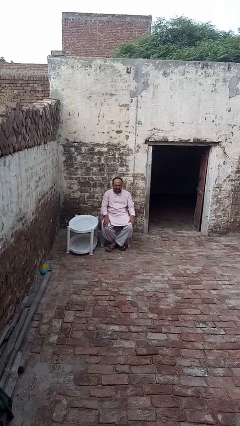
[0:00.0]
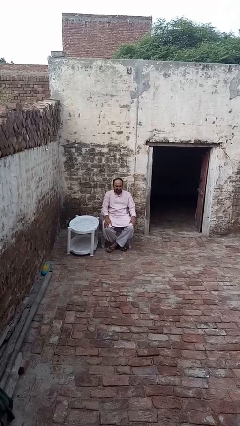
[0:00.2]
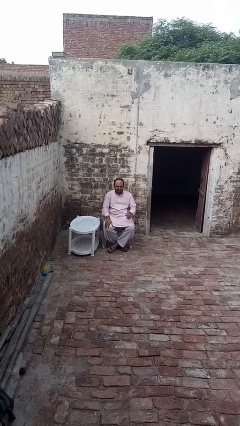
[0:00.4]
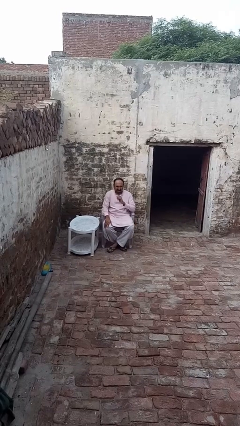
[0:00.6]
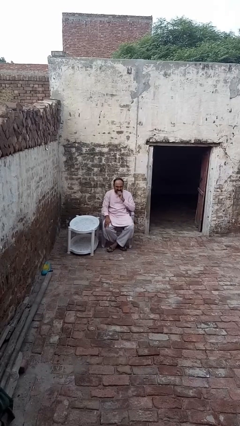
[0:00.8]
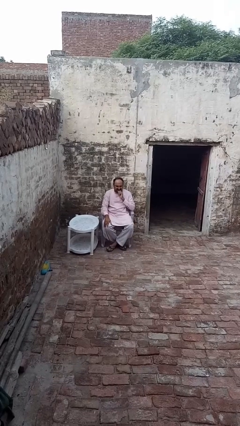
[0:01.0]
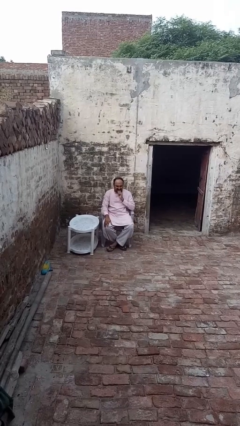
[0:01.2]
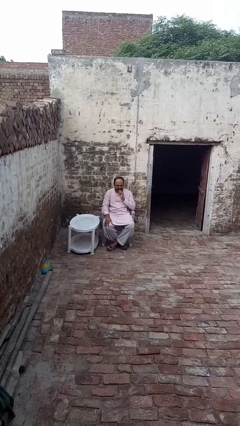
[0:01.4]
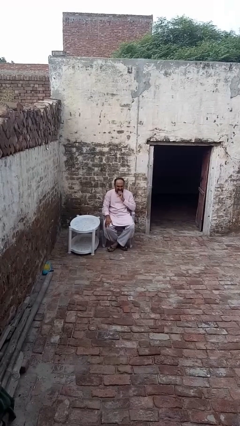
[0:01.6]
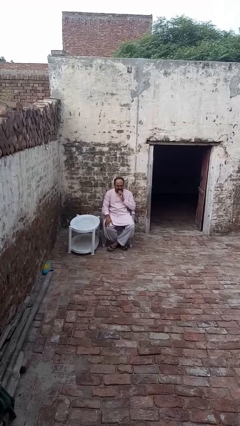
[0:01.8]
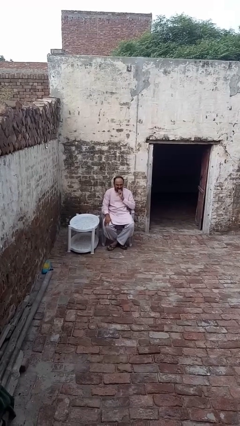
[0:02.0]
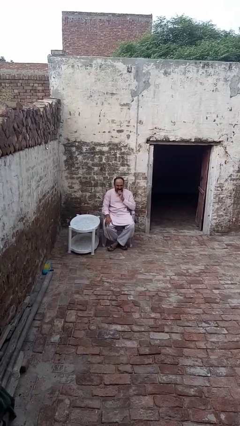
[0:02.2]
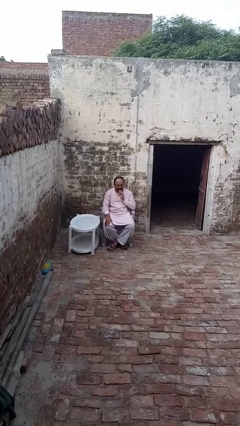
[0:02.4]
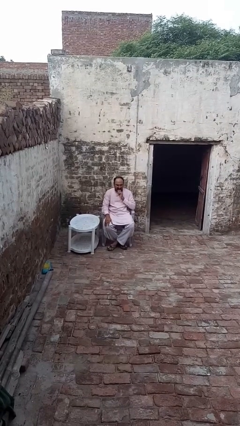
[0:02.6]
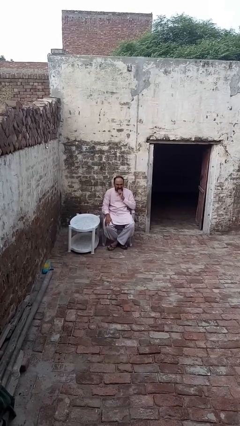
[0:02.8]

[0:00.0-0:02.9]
person strokes chin

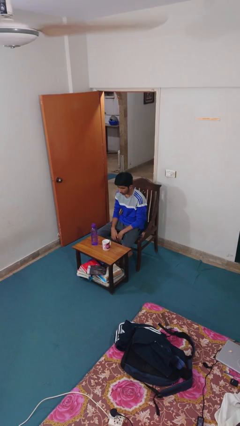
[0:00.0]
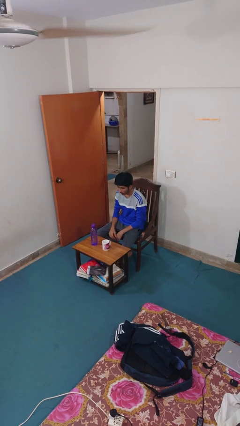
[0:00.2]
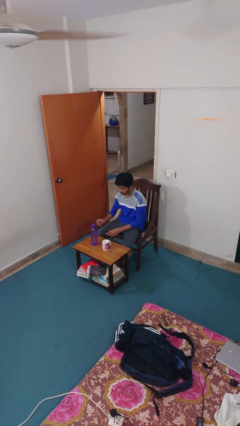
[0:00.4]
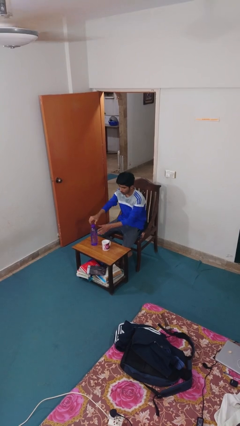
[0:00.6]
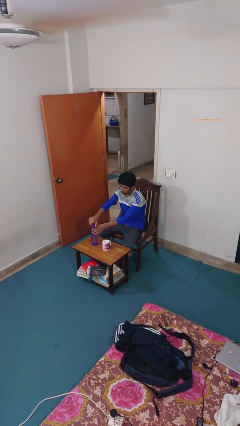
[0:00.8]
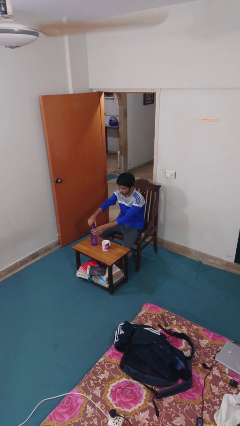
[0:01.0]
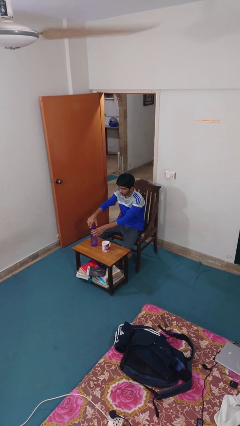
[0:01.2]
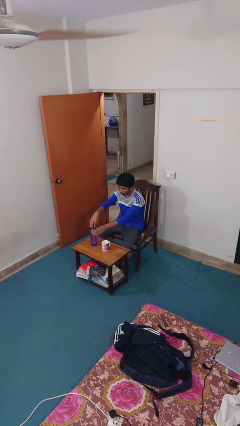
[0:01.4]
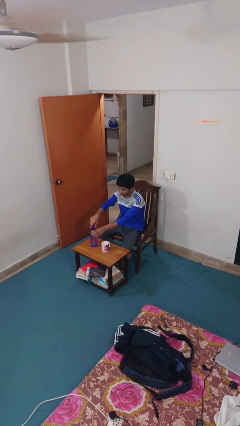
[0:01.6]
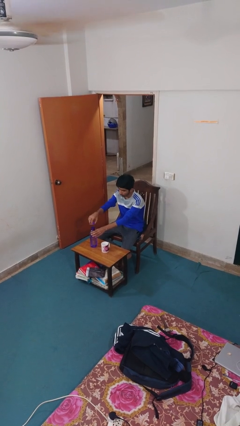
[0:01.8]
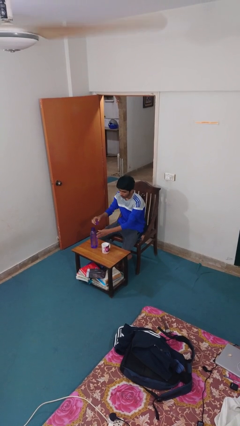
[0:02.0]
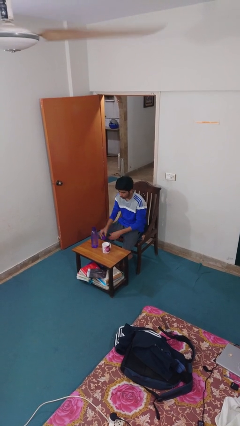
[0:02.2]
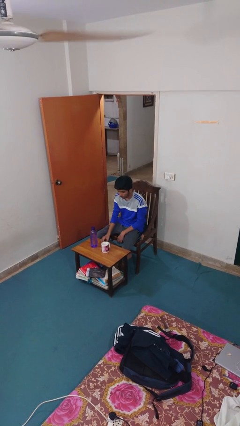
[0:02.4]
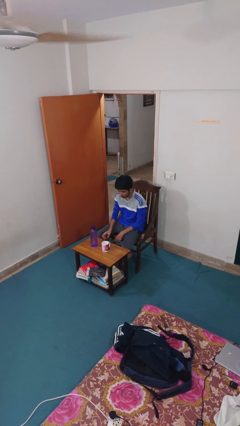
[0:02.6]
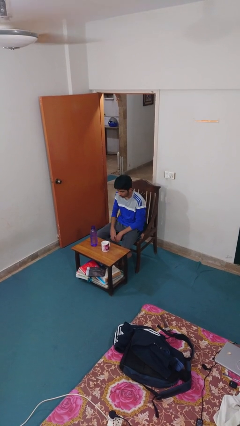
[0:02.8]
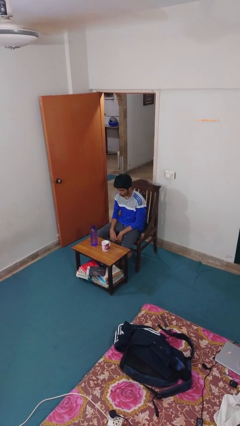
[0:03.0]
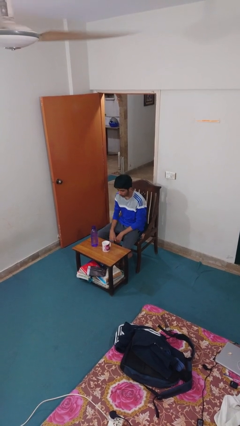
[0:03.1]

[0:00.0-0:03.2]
person unscrews lid from bottle

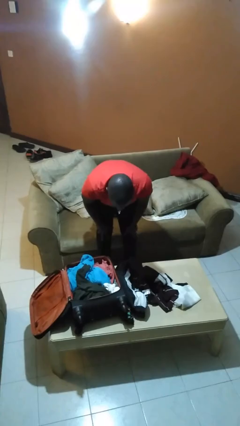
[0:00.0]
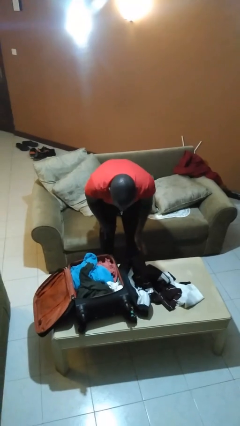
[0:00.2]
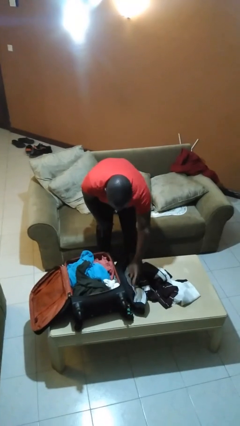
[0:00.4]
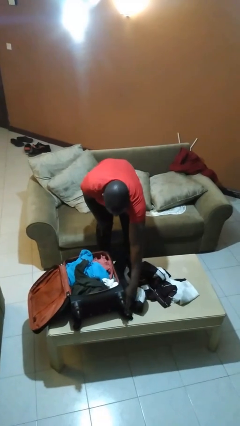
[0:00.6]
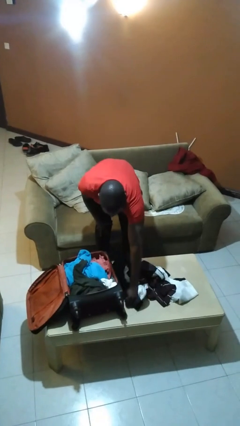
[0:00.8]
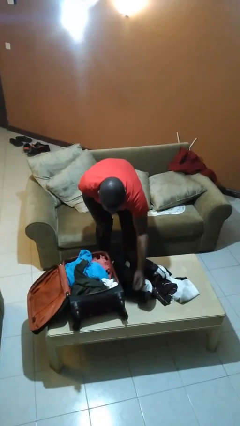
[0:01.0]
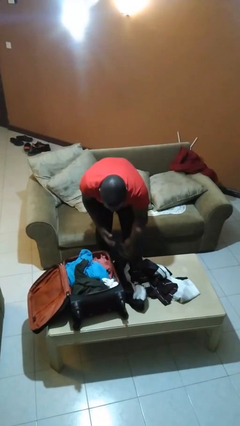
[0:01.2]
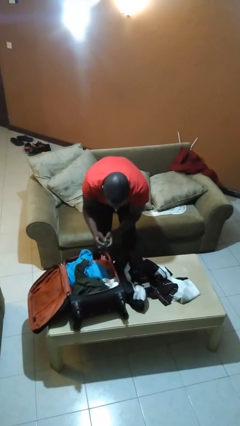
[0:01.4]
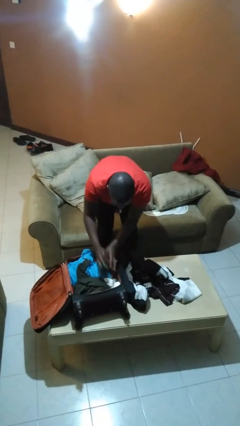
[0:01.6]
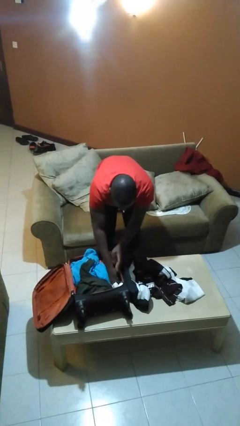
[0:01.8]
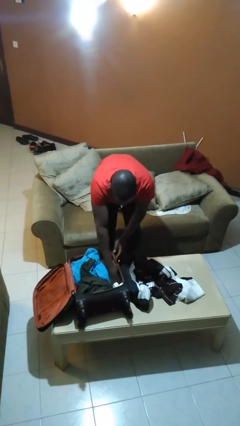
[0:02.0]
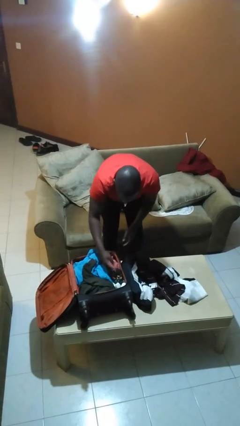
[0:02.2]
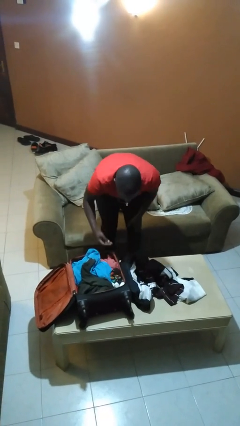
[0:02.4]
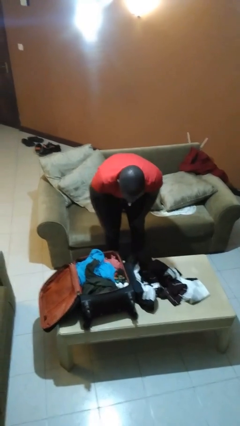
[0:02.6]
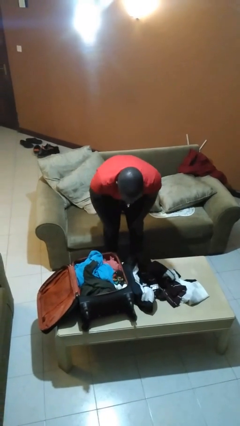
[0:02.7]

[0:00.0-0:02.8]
person loads clothes into suitcase

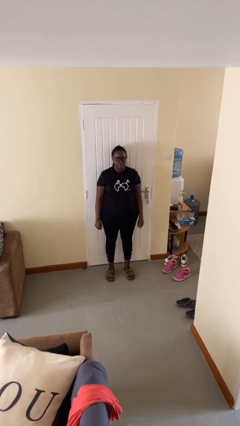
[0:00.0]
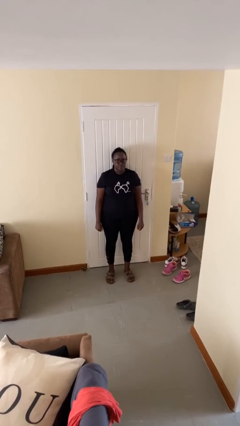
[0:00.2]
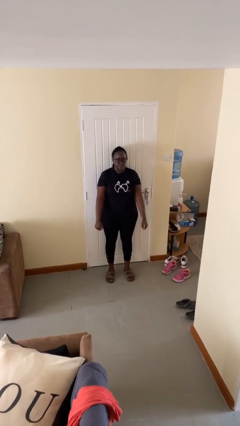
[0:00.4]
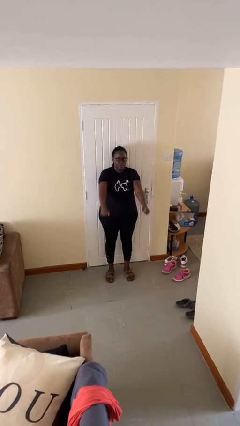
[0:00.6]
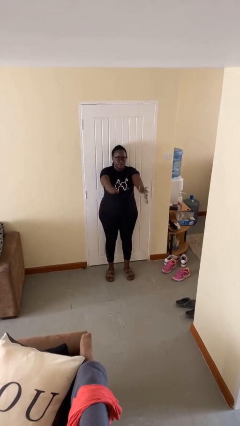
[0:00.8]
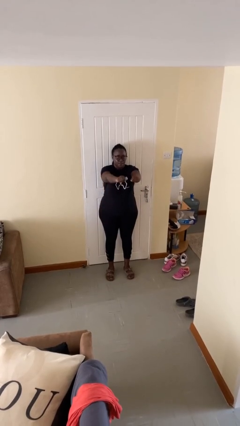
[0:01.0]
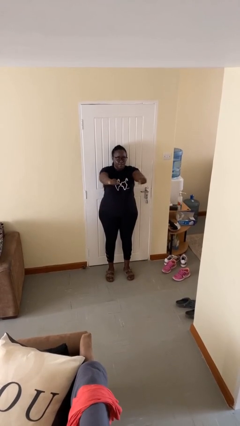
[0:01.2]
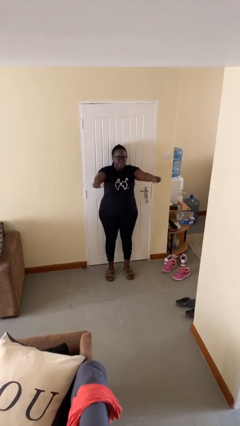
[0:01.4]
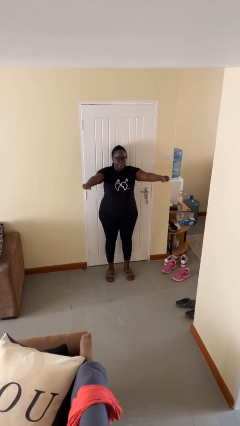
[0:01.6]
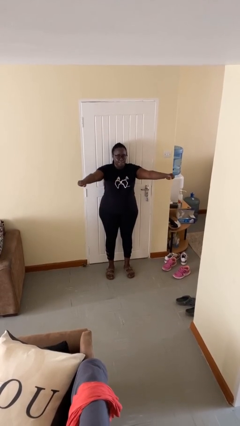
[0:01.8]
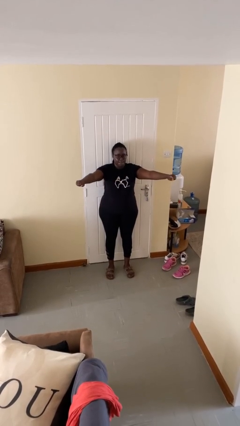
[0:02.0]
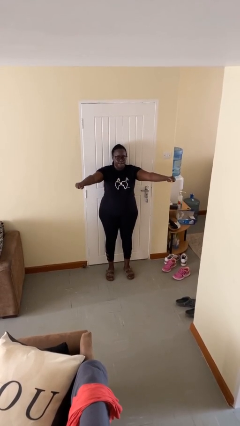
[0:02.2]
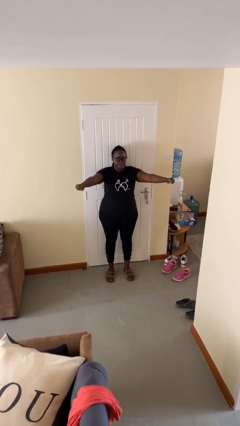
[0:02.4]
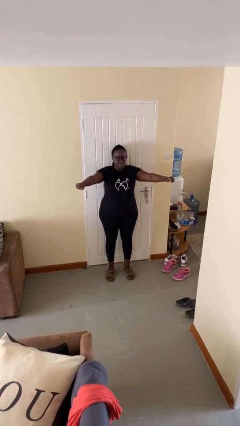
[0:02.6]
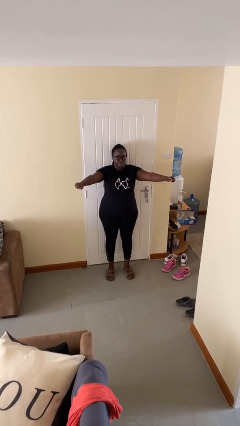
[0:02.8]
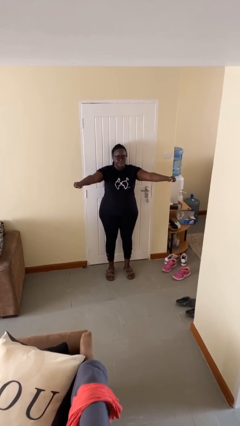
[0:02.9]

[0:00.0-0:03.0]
person gestures zoom in

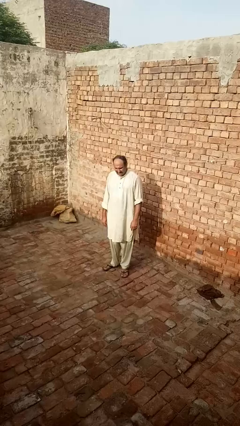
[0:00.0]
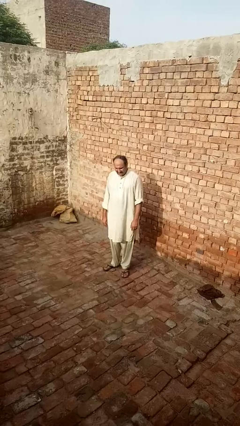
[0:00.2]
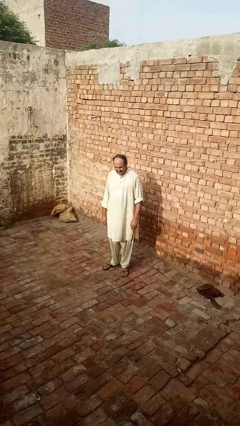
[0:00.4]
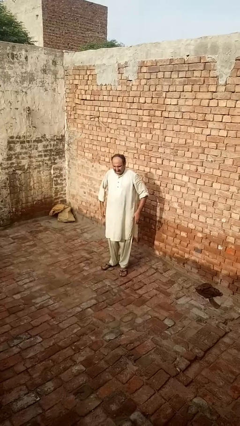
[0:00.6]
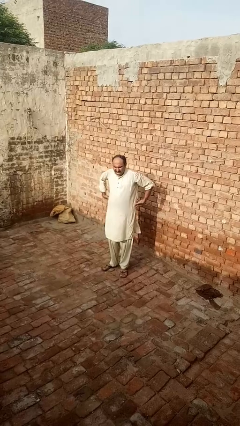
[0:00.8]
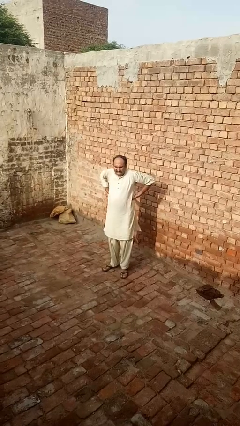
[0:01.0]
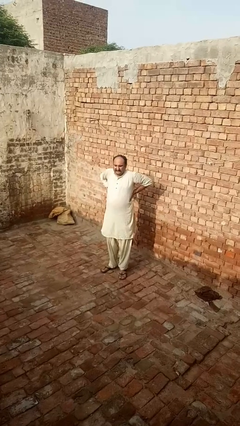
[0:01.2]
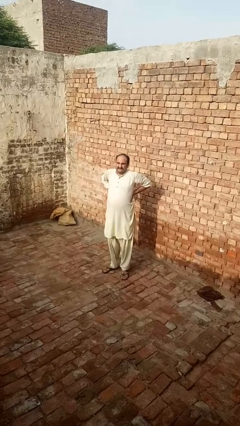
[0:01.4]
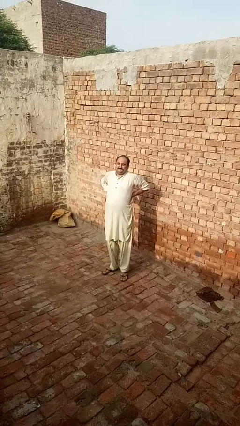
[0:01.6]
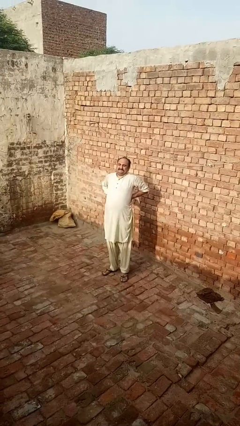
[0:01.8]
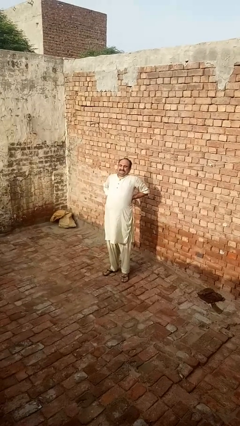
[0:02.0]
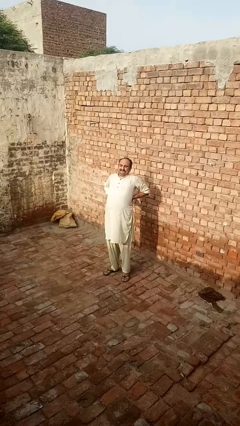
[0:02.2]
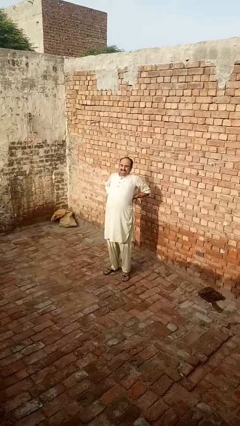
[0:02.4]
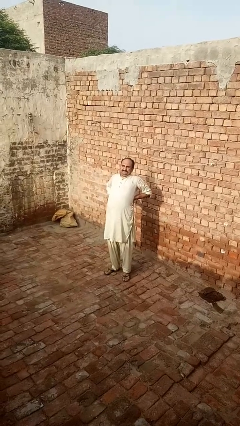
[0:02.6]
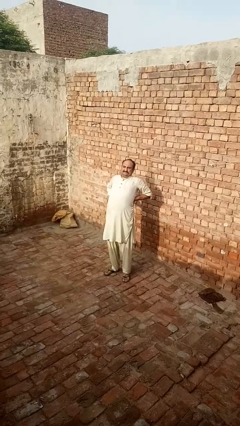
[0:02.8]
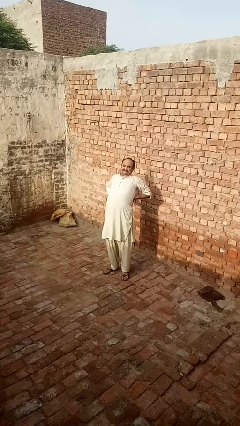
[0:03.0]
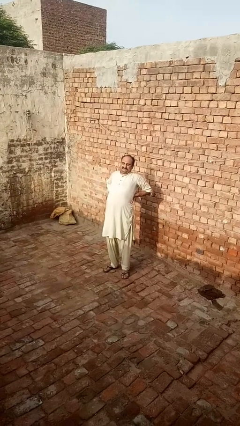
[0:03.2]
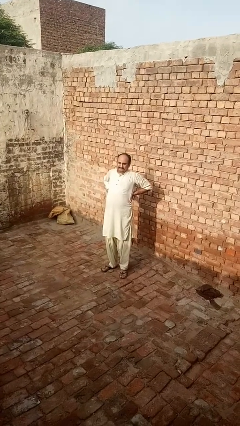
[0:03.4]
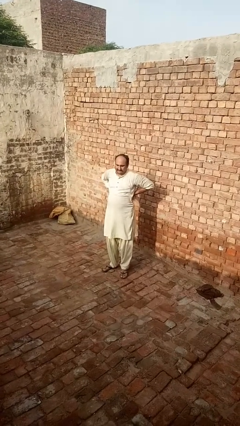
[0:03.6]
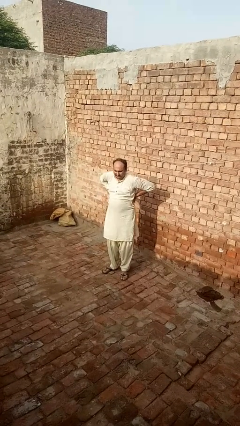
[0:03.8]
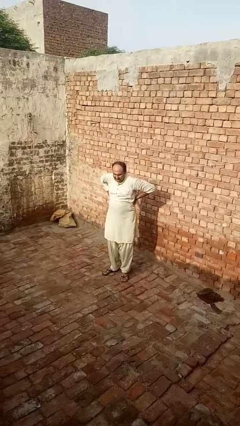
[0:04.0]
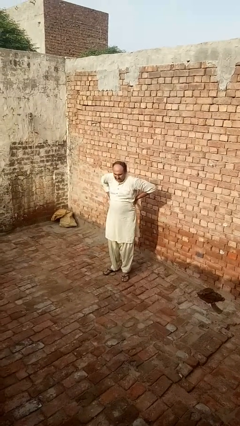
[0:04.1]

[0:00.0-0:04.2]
person stretches back

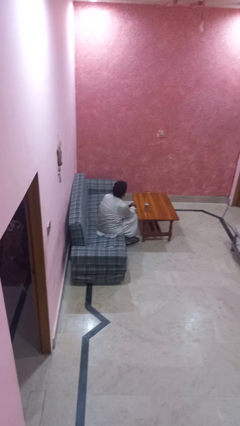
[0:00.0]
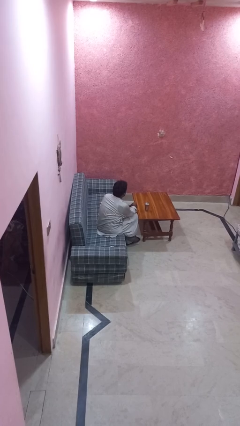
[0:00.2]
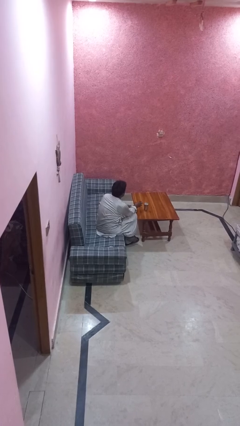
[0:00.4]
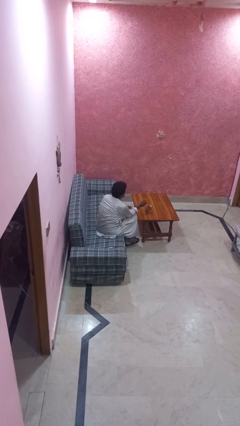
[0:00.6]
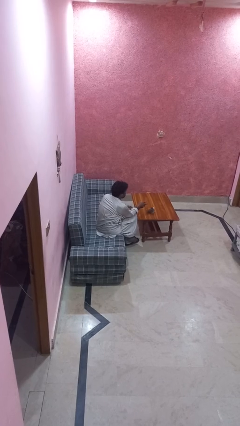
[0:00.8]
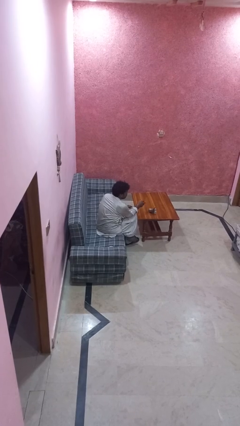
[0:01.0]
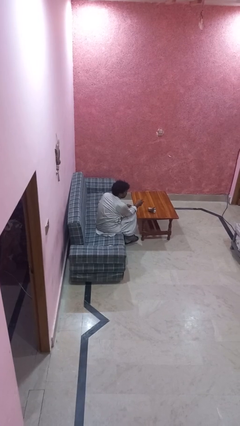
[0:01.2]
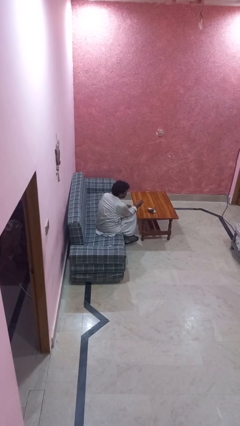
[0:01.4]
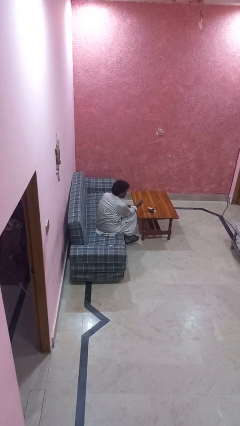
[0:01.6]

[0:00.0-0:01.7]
person knocks over glass
